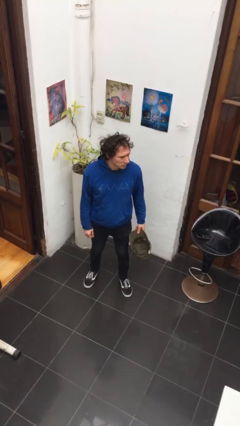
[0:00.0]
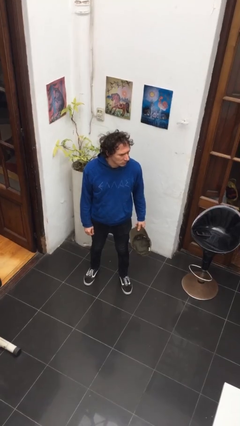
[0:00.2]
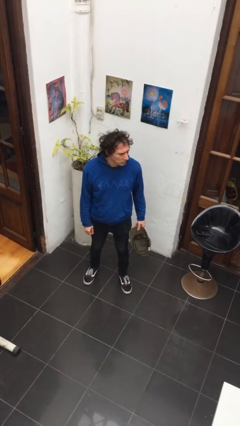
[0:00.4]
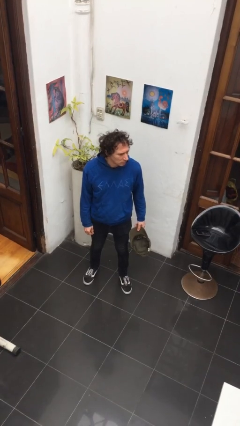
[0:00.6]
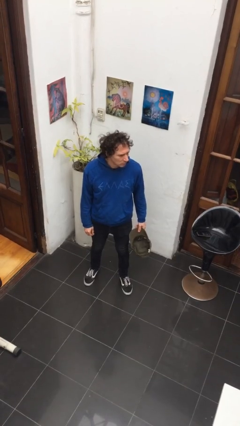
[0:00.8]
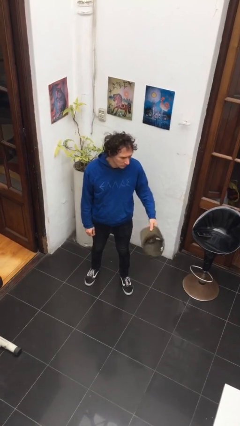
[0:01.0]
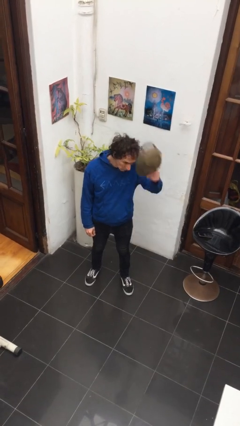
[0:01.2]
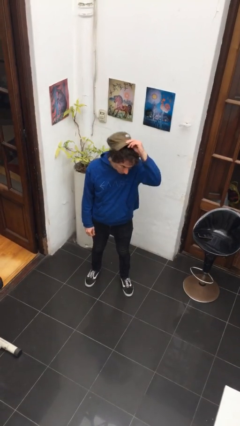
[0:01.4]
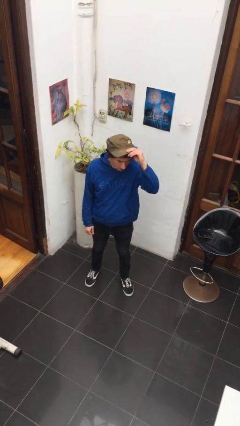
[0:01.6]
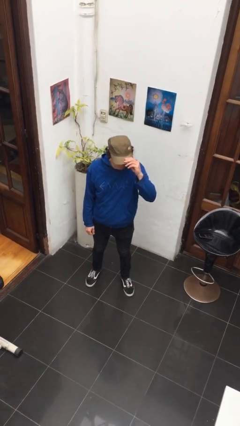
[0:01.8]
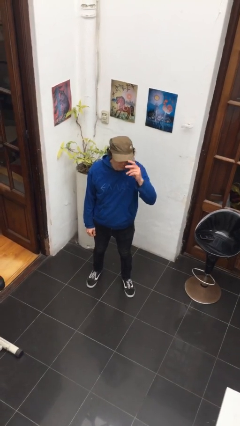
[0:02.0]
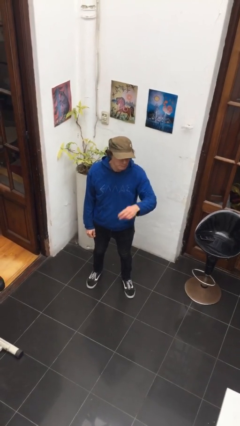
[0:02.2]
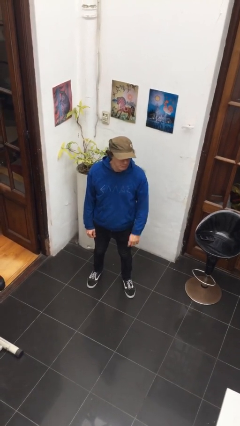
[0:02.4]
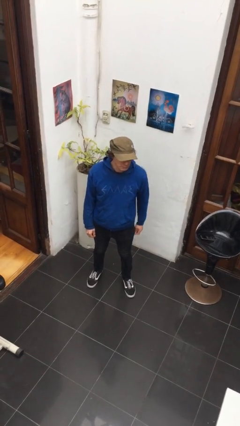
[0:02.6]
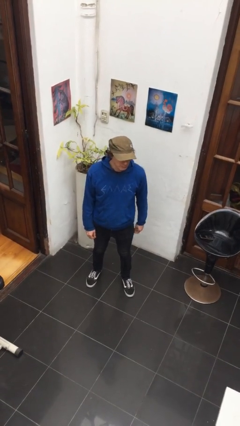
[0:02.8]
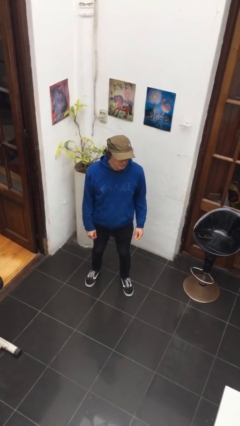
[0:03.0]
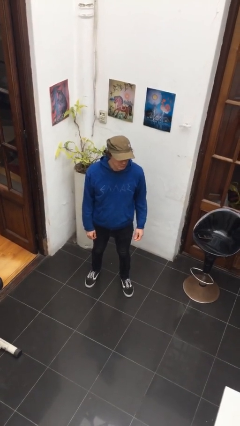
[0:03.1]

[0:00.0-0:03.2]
person puts on hat

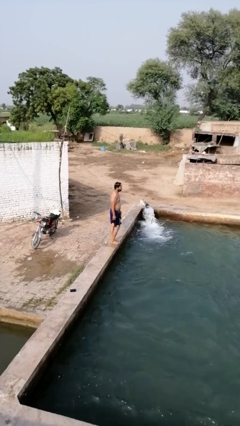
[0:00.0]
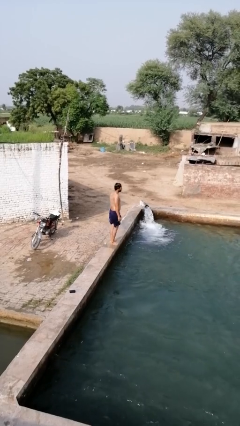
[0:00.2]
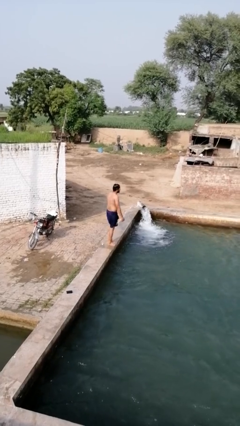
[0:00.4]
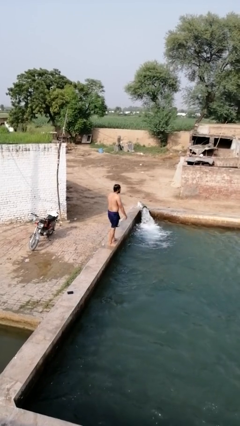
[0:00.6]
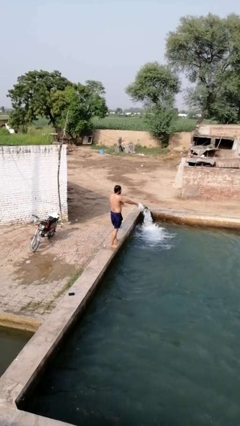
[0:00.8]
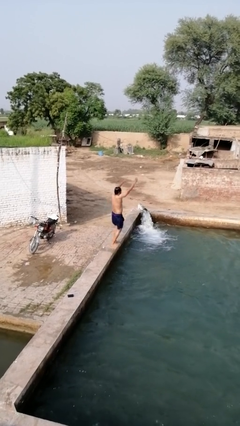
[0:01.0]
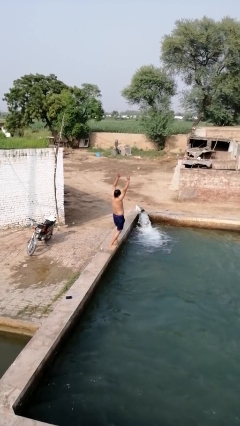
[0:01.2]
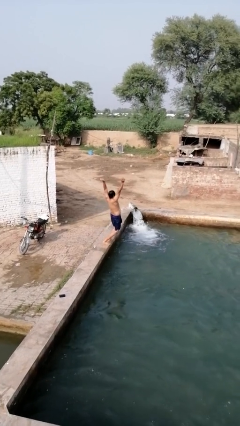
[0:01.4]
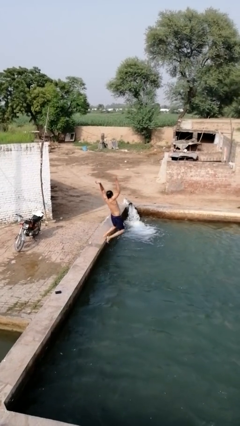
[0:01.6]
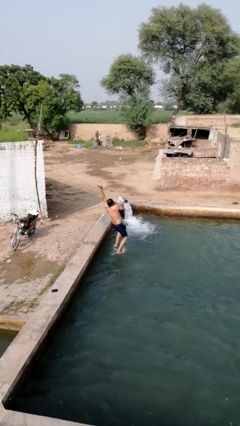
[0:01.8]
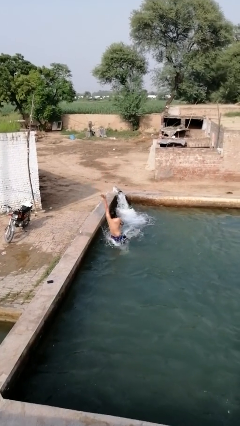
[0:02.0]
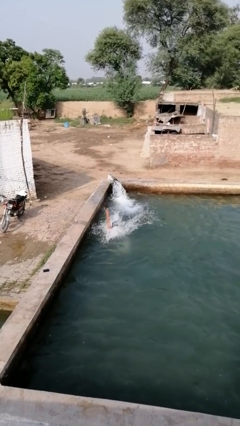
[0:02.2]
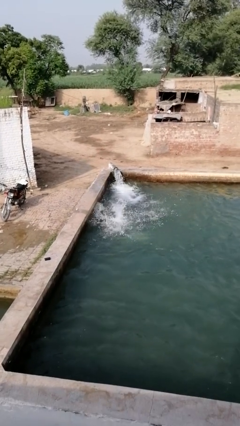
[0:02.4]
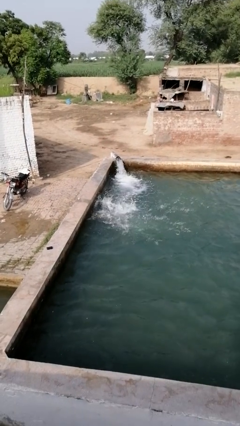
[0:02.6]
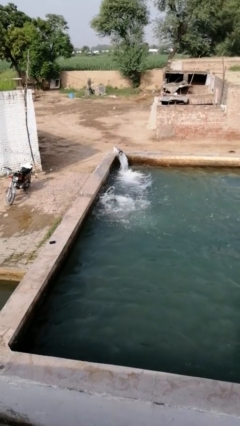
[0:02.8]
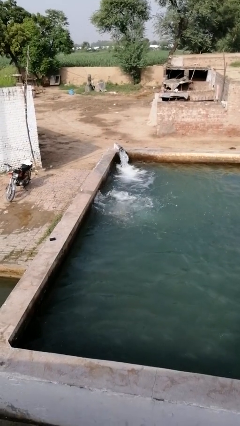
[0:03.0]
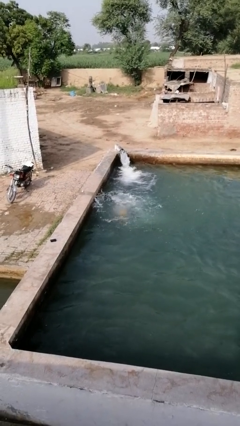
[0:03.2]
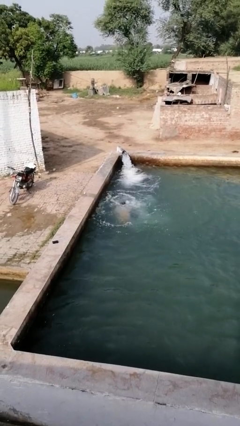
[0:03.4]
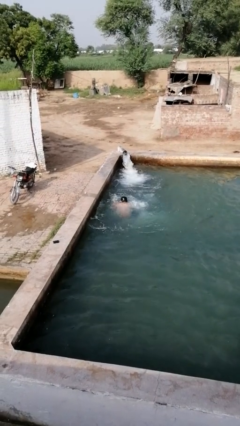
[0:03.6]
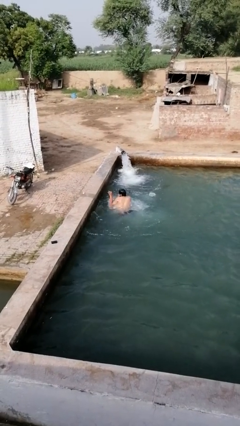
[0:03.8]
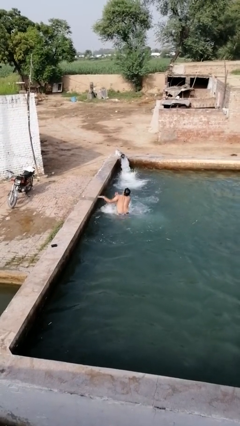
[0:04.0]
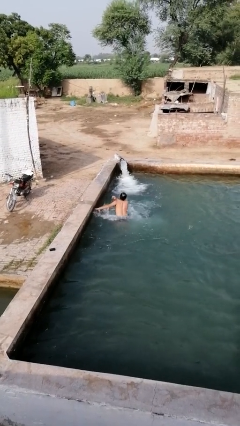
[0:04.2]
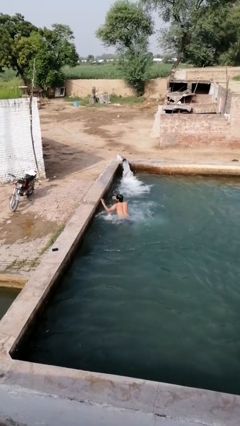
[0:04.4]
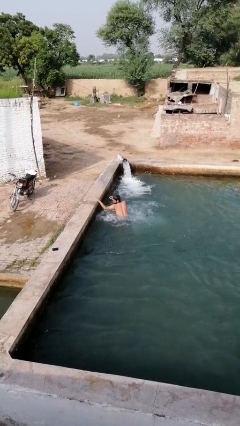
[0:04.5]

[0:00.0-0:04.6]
person falls into pool

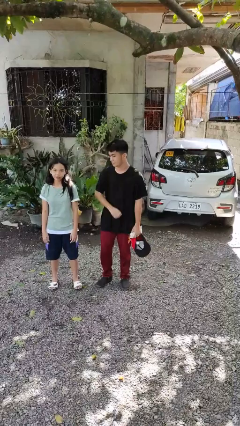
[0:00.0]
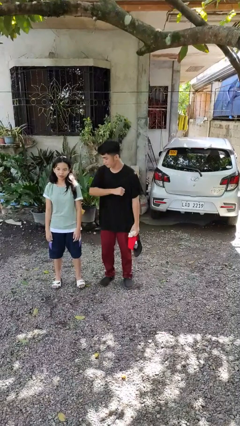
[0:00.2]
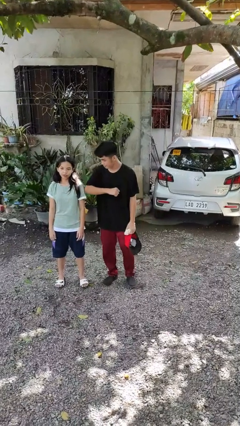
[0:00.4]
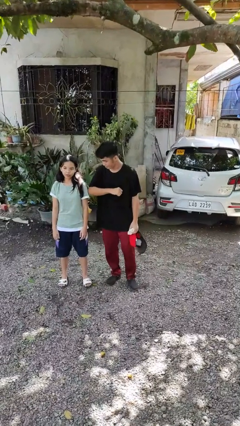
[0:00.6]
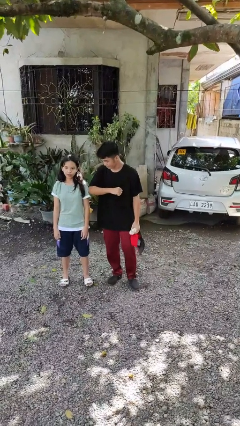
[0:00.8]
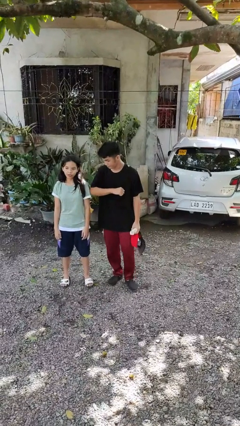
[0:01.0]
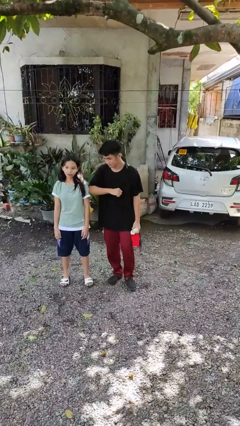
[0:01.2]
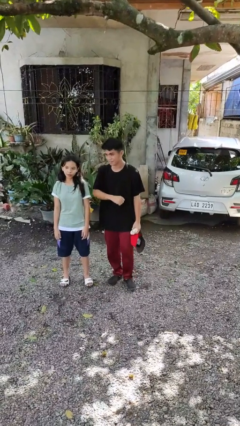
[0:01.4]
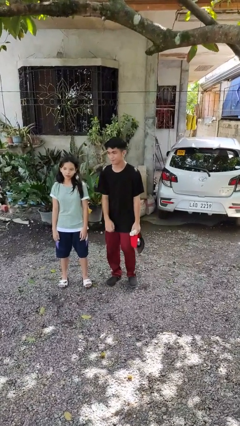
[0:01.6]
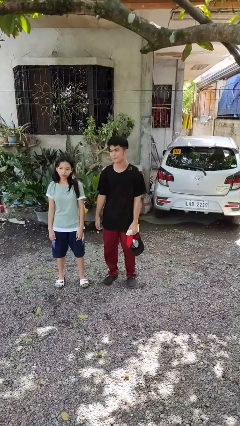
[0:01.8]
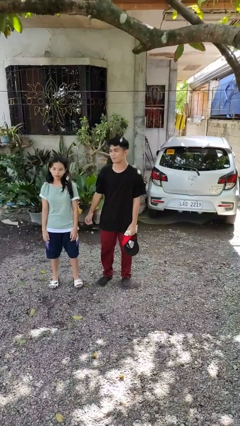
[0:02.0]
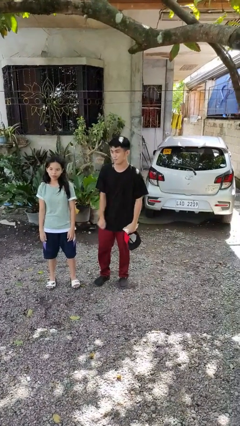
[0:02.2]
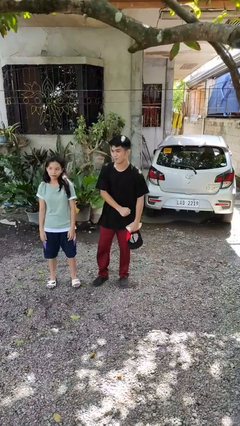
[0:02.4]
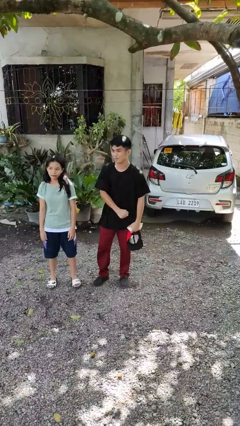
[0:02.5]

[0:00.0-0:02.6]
person nudges person with elbow

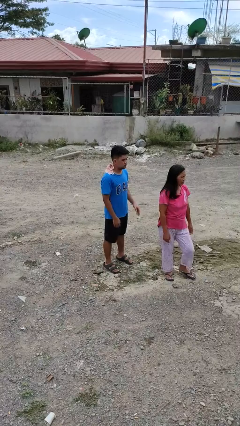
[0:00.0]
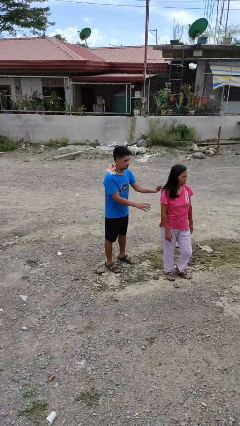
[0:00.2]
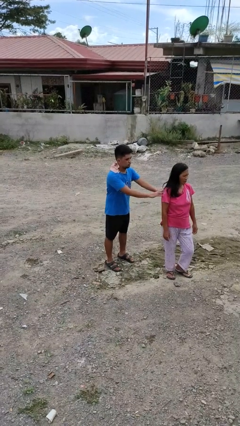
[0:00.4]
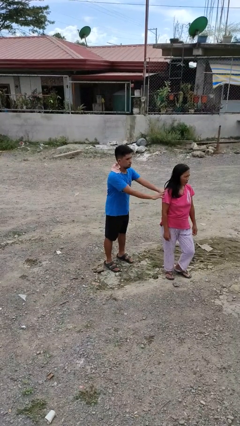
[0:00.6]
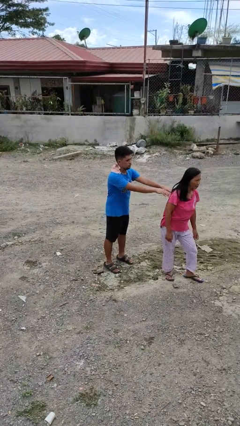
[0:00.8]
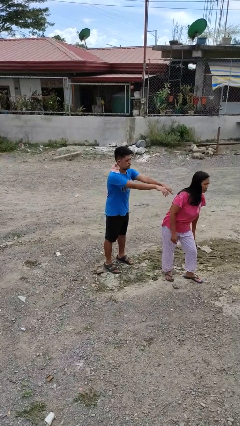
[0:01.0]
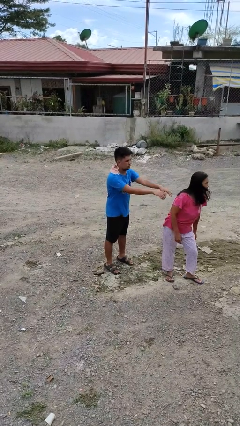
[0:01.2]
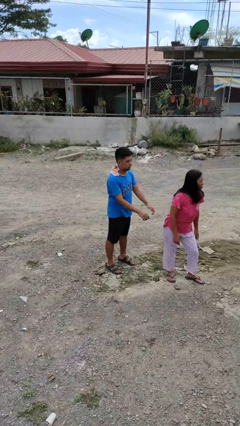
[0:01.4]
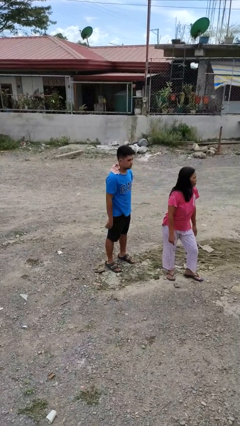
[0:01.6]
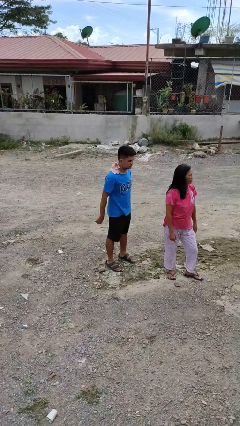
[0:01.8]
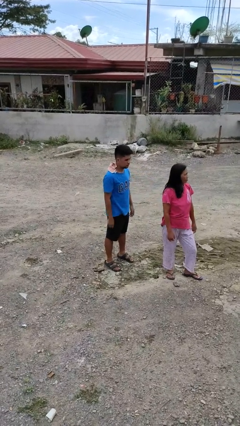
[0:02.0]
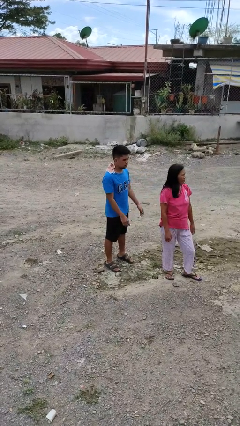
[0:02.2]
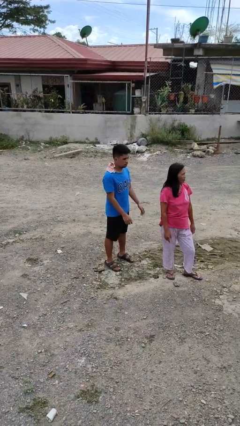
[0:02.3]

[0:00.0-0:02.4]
person shoves person

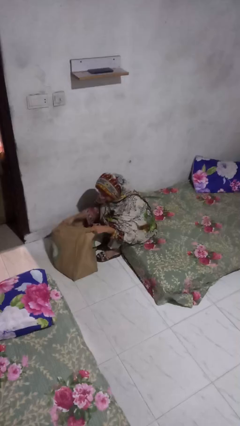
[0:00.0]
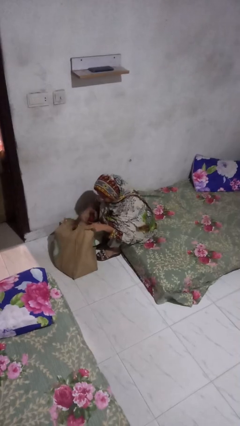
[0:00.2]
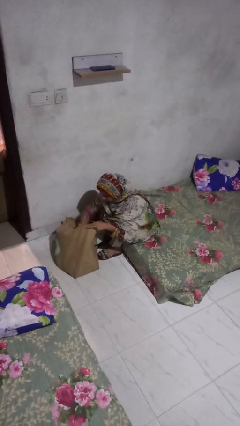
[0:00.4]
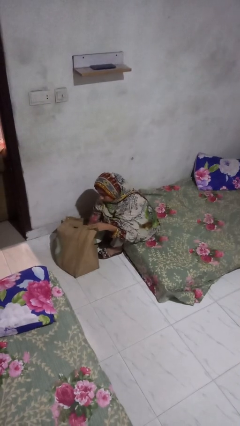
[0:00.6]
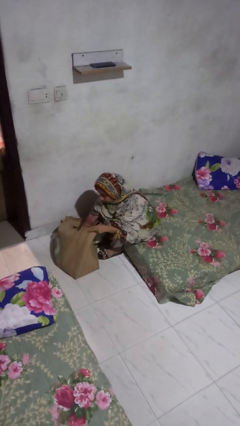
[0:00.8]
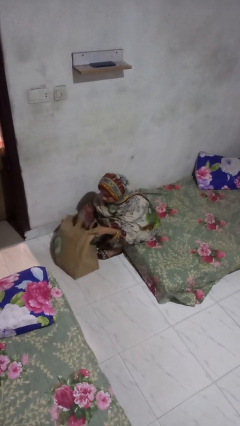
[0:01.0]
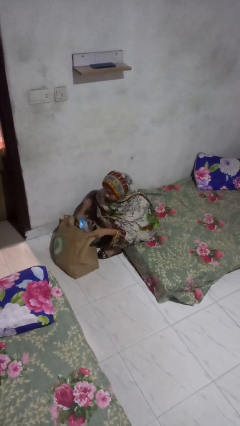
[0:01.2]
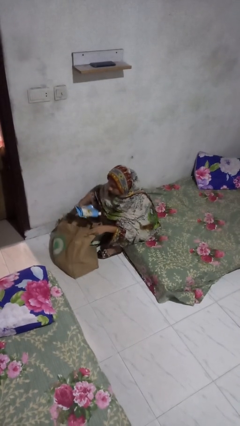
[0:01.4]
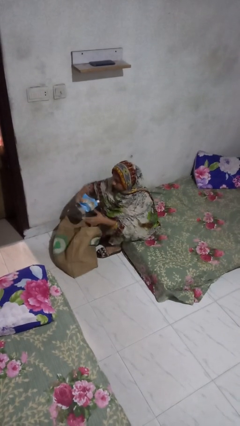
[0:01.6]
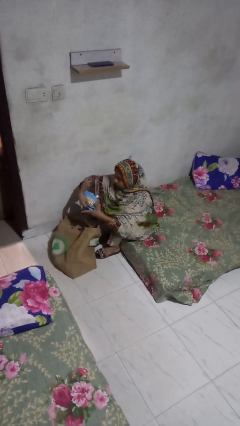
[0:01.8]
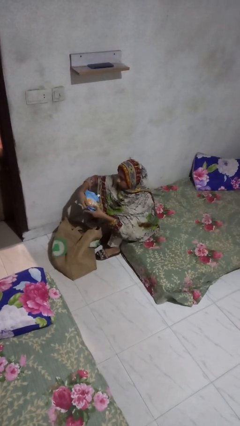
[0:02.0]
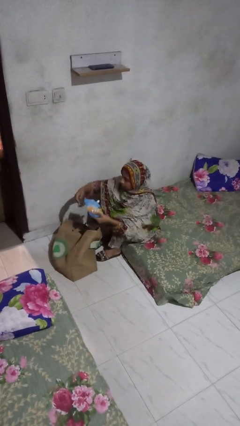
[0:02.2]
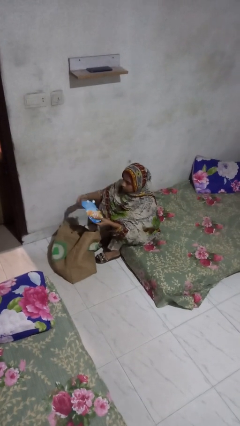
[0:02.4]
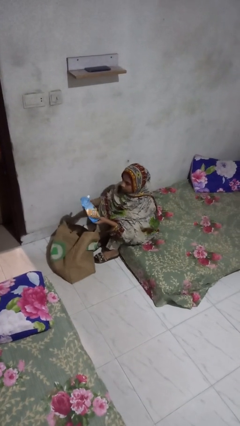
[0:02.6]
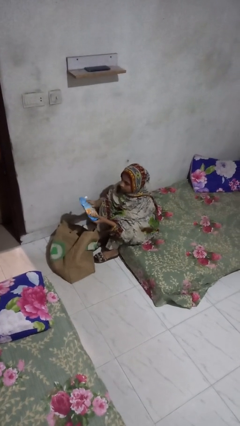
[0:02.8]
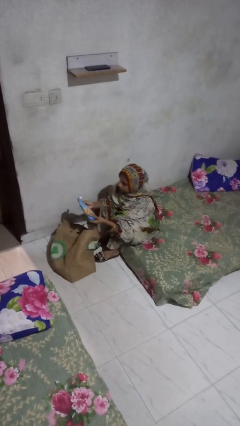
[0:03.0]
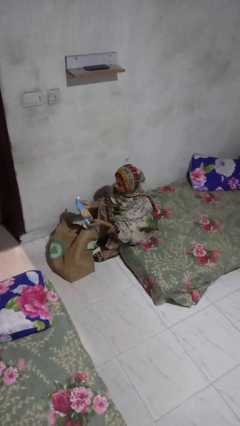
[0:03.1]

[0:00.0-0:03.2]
person takes object from bag

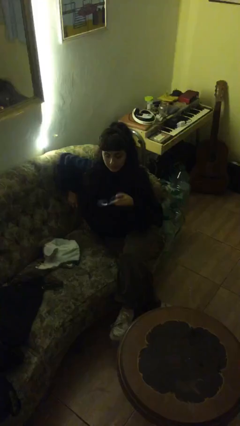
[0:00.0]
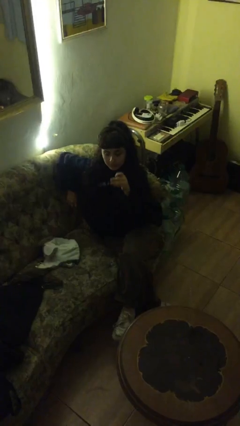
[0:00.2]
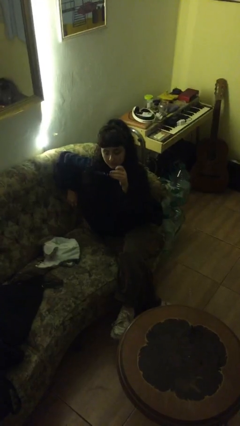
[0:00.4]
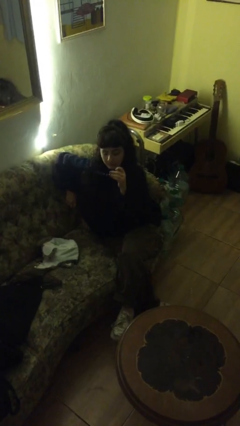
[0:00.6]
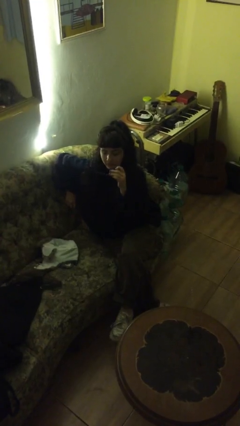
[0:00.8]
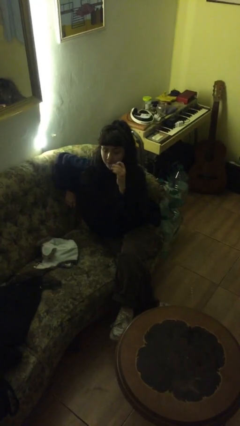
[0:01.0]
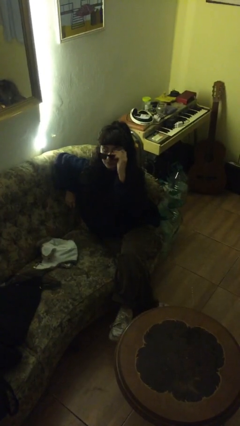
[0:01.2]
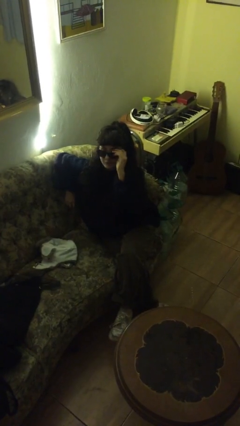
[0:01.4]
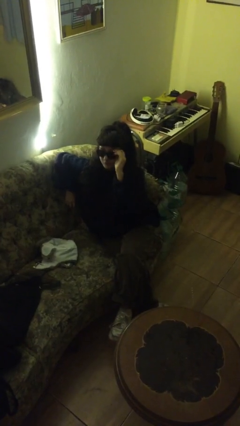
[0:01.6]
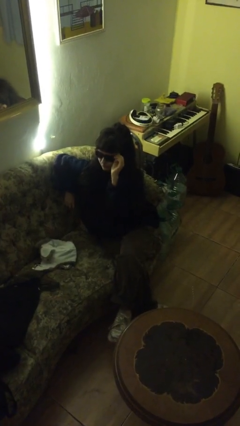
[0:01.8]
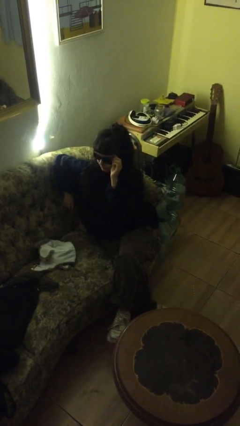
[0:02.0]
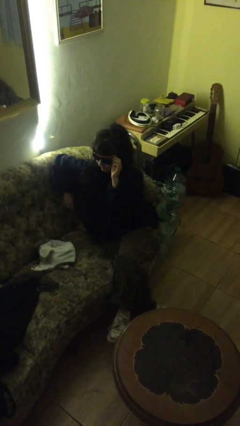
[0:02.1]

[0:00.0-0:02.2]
person puts on sunglasses
